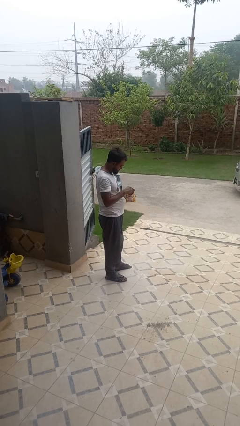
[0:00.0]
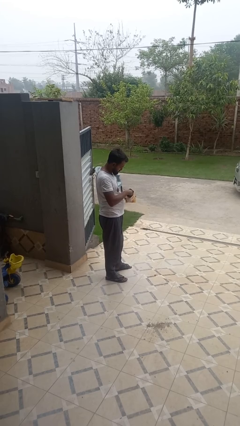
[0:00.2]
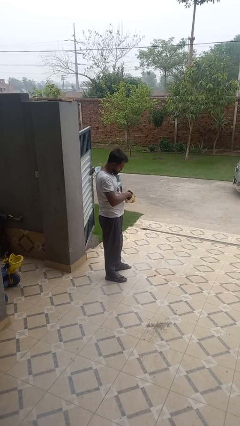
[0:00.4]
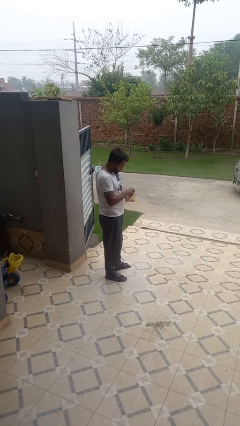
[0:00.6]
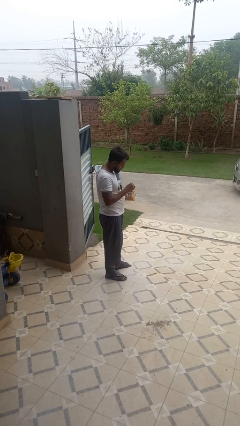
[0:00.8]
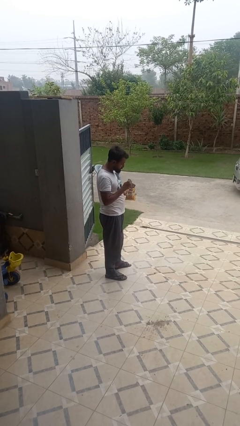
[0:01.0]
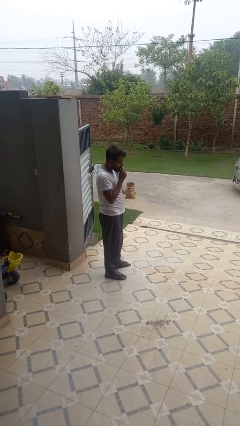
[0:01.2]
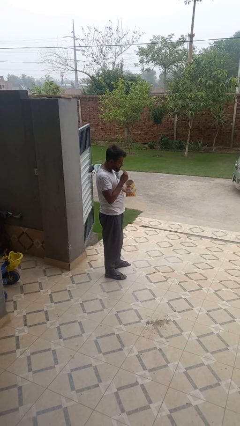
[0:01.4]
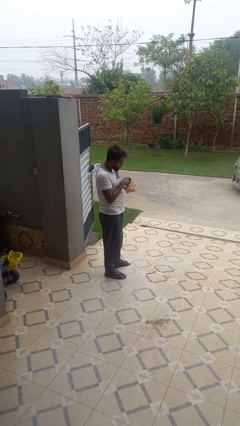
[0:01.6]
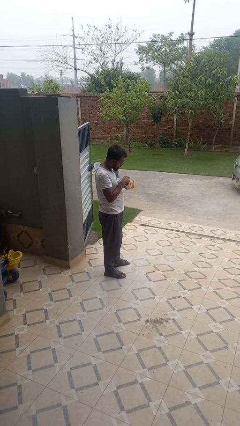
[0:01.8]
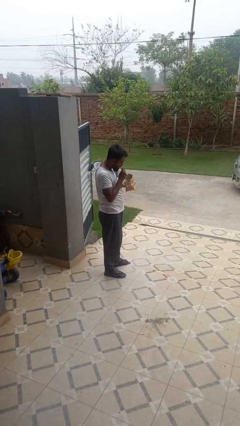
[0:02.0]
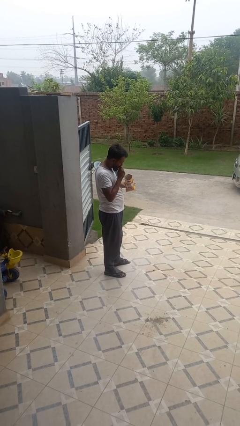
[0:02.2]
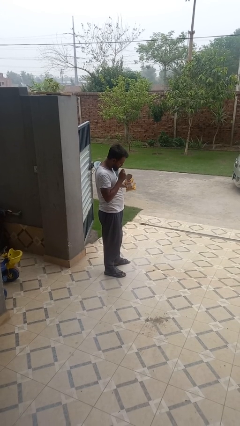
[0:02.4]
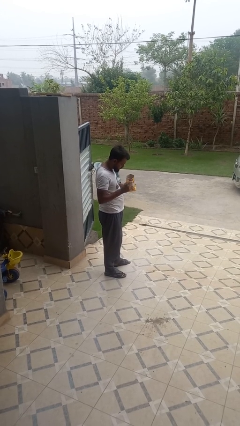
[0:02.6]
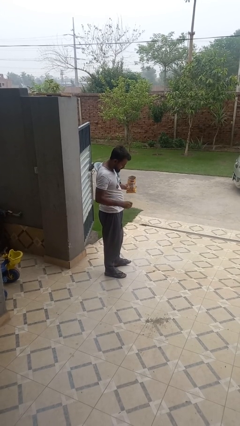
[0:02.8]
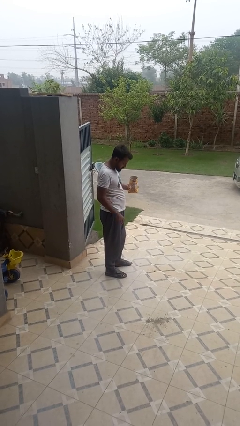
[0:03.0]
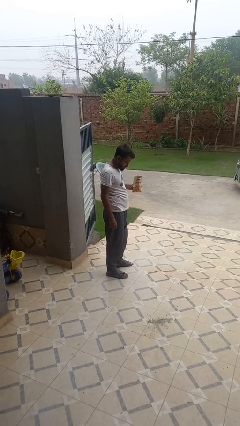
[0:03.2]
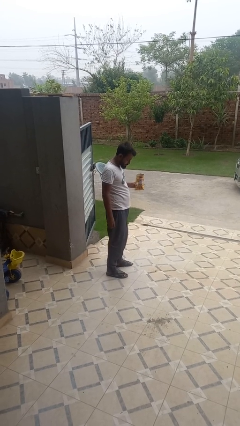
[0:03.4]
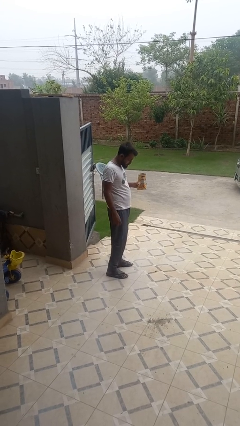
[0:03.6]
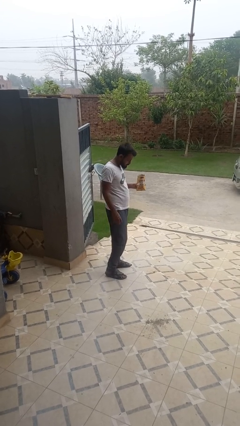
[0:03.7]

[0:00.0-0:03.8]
person eats snack from bag

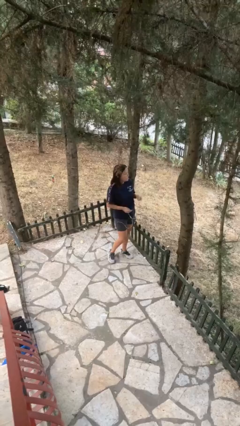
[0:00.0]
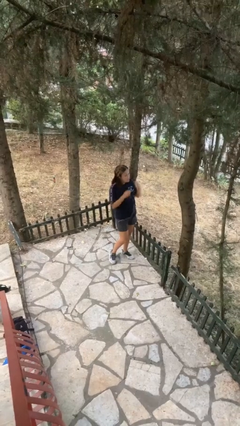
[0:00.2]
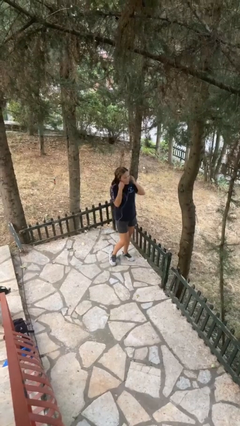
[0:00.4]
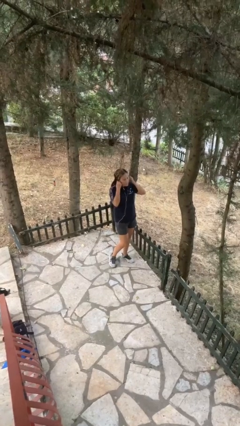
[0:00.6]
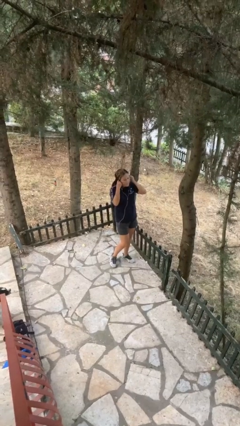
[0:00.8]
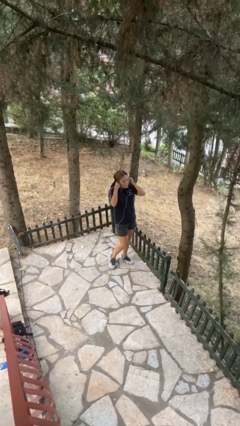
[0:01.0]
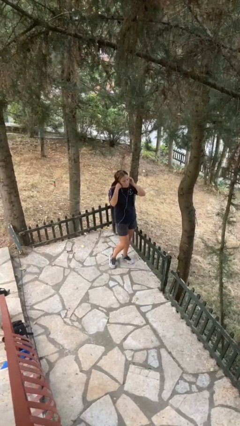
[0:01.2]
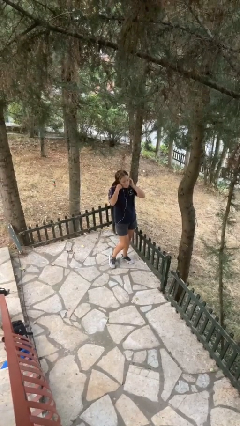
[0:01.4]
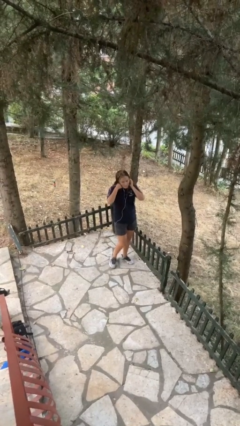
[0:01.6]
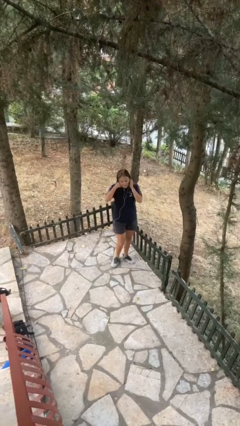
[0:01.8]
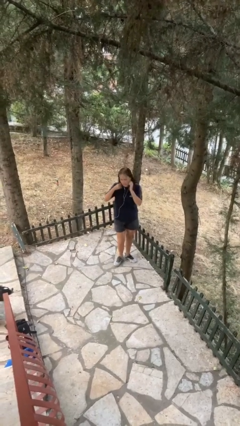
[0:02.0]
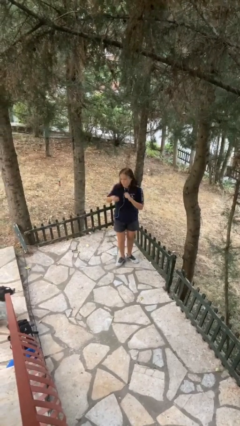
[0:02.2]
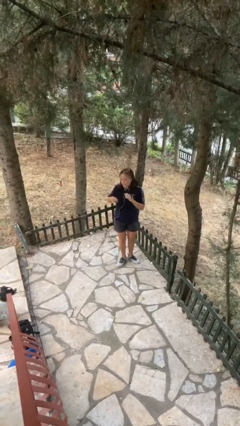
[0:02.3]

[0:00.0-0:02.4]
person puts on headphones

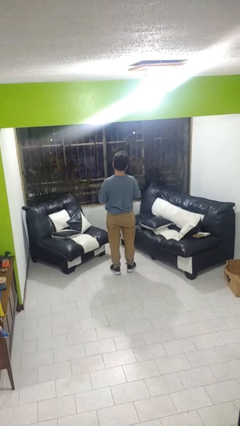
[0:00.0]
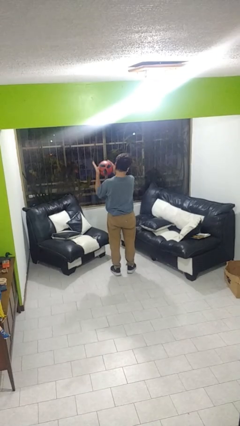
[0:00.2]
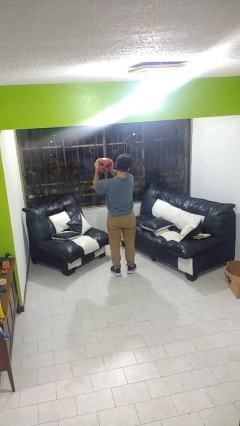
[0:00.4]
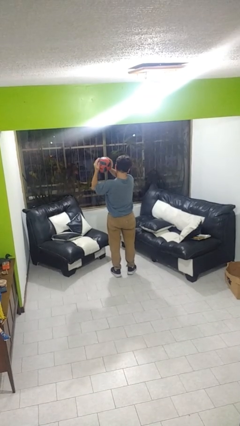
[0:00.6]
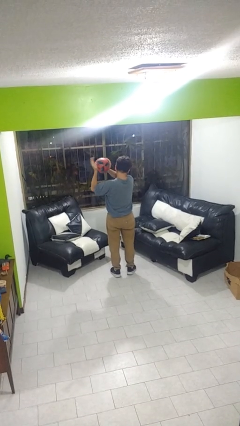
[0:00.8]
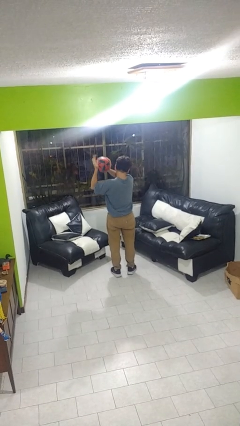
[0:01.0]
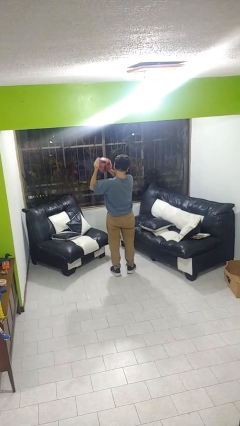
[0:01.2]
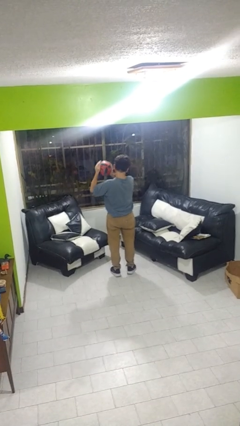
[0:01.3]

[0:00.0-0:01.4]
person squeezes object

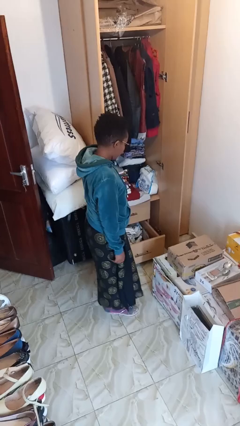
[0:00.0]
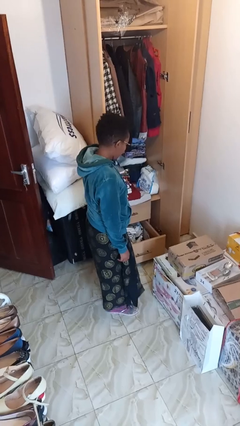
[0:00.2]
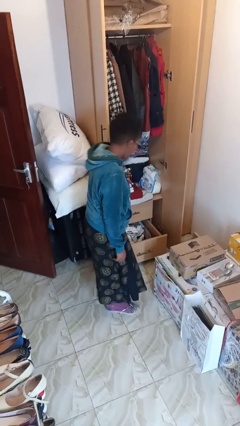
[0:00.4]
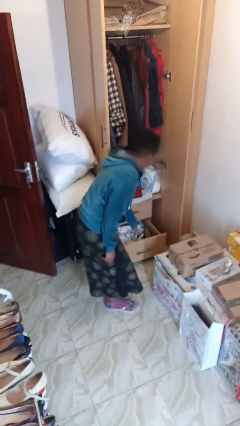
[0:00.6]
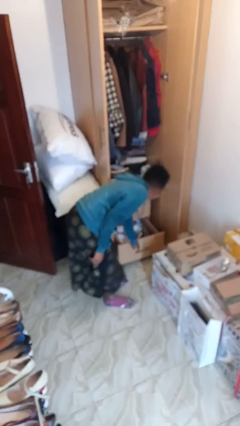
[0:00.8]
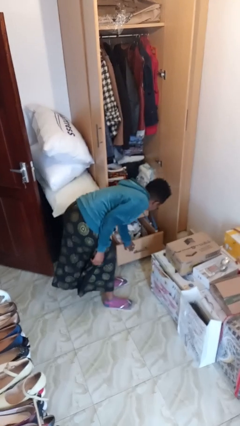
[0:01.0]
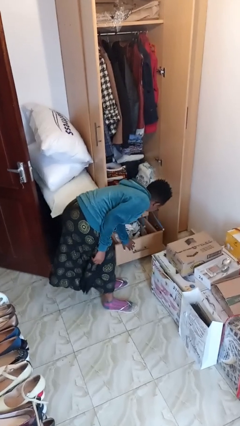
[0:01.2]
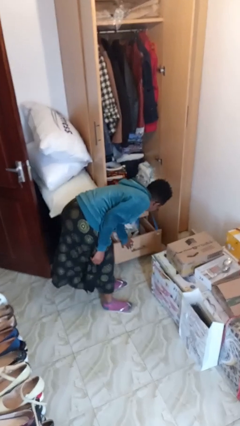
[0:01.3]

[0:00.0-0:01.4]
person closes dresser drawer

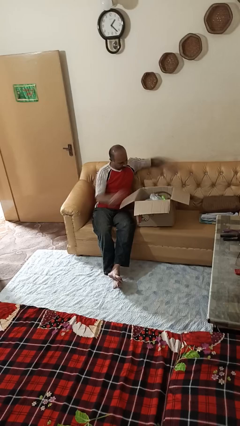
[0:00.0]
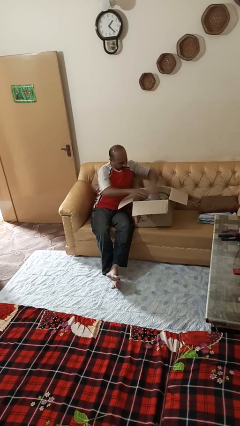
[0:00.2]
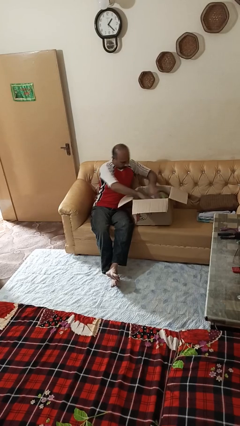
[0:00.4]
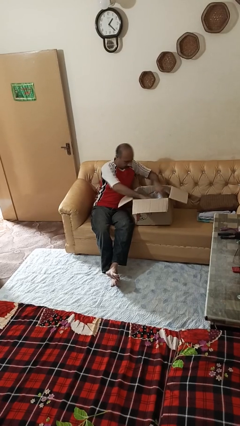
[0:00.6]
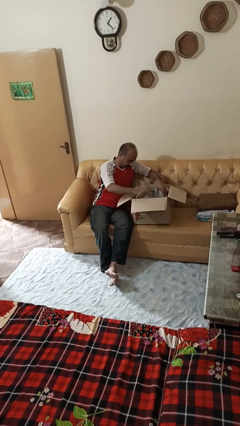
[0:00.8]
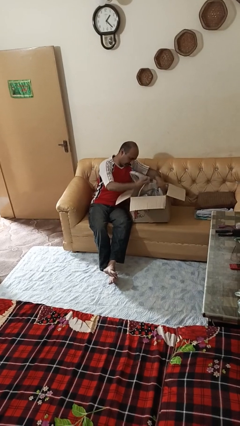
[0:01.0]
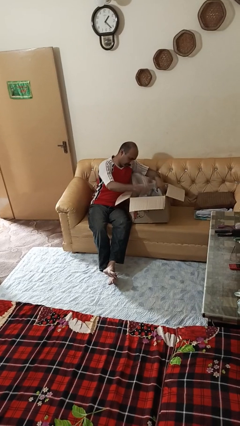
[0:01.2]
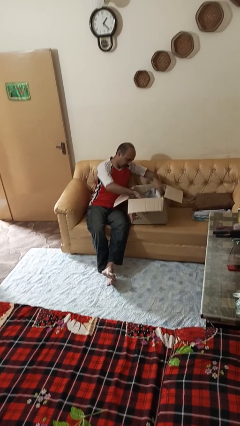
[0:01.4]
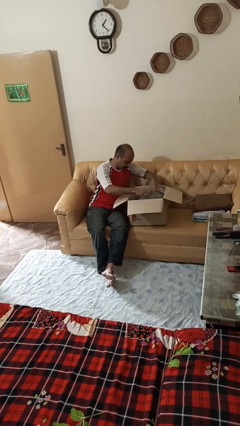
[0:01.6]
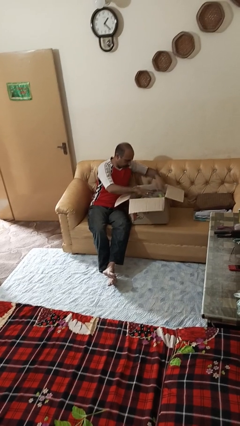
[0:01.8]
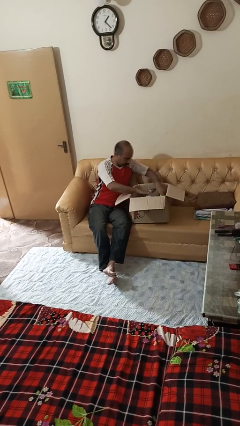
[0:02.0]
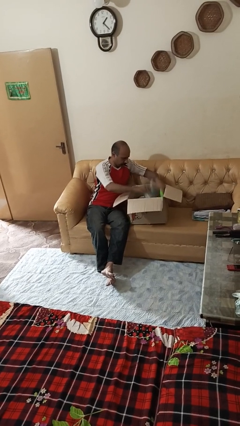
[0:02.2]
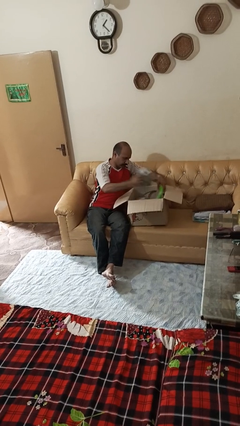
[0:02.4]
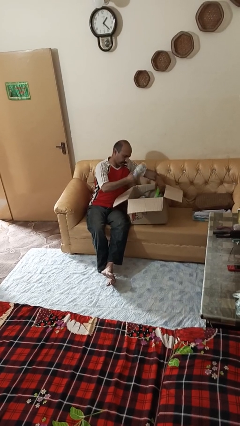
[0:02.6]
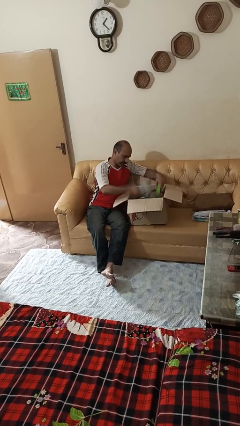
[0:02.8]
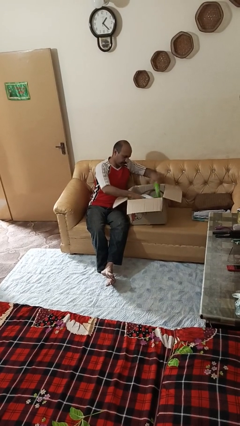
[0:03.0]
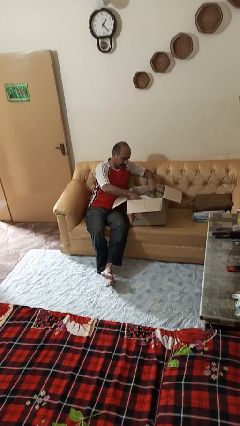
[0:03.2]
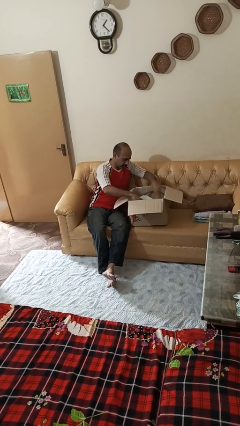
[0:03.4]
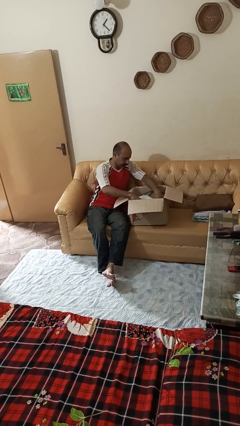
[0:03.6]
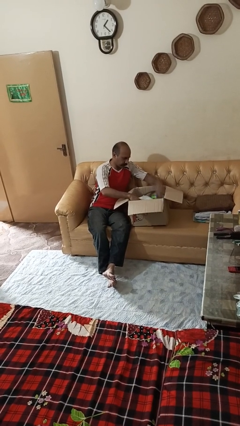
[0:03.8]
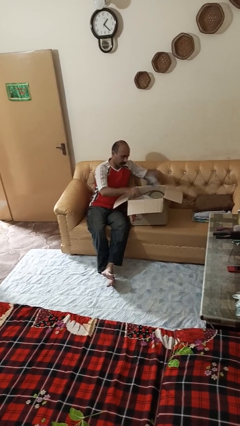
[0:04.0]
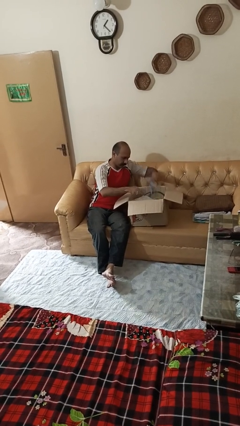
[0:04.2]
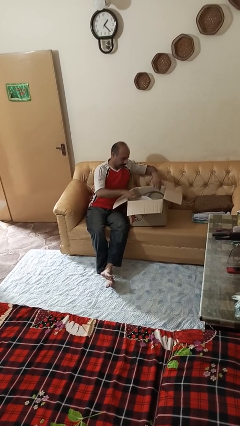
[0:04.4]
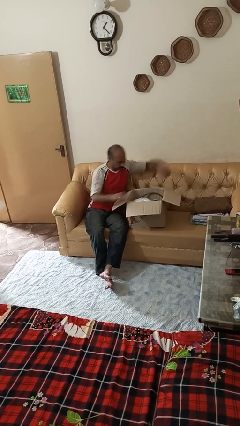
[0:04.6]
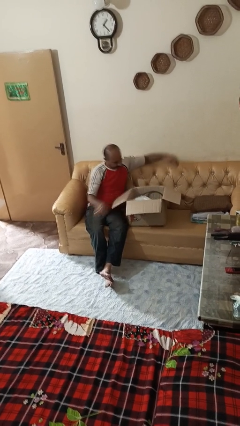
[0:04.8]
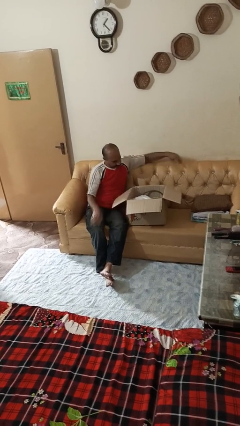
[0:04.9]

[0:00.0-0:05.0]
person searches in box

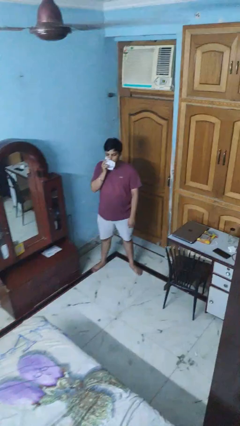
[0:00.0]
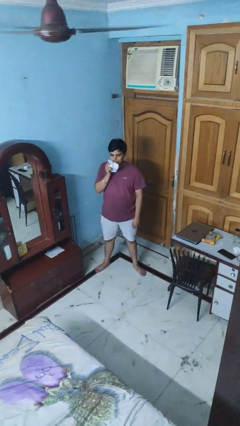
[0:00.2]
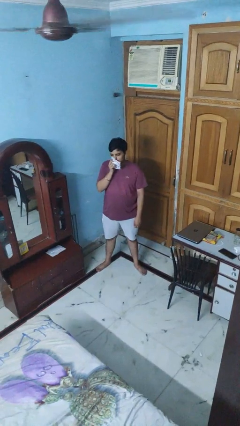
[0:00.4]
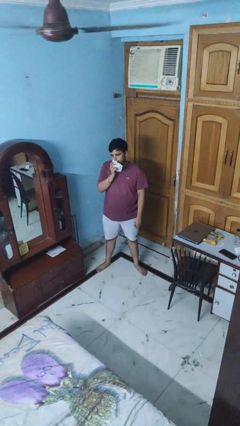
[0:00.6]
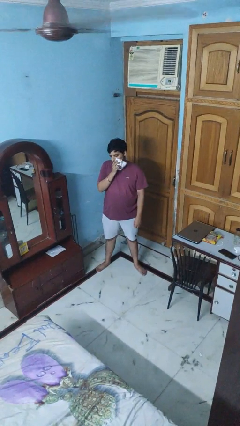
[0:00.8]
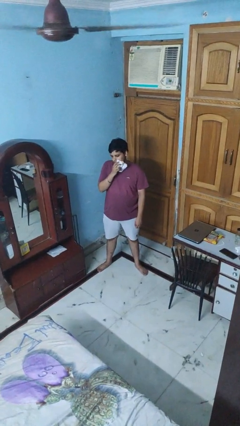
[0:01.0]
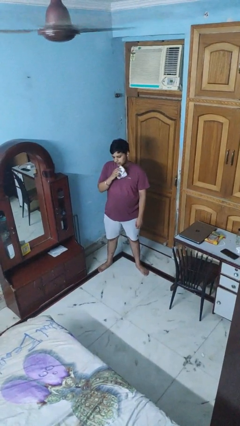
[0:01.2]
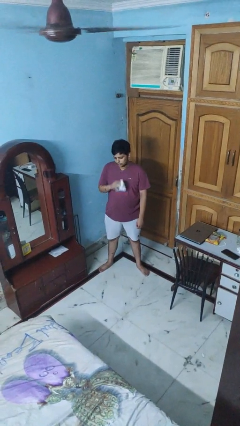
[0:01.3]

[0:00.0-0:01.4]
person wipes mouth with napkin

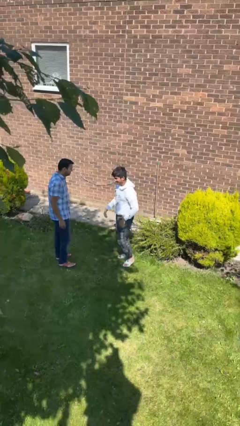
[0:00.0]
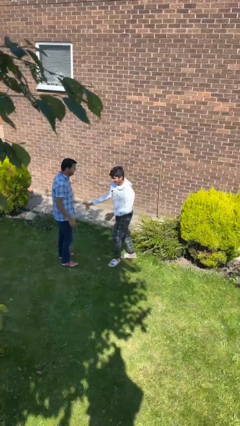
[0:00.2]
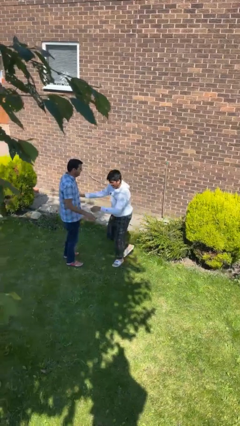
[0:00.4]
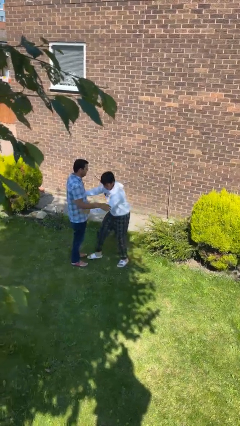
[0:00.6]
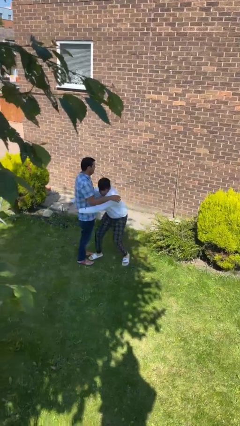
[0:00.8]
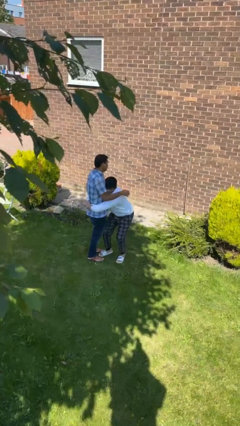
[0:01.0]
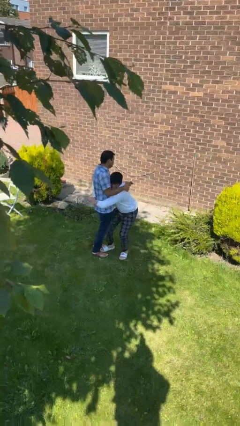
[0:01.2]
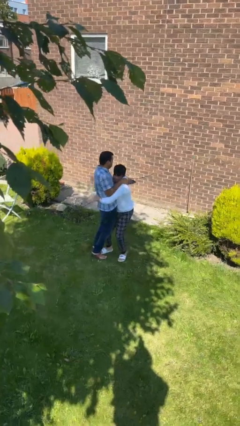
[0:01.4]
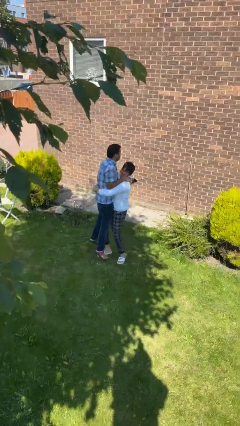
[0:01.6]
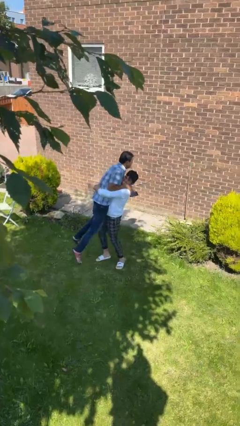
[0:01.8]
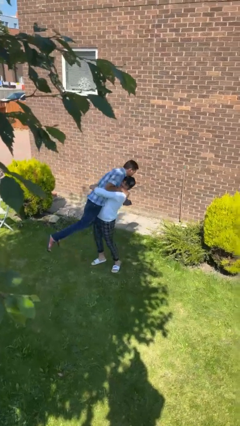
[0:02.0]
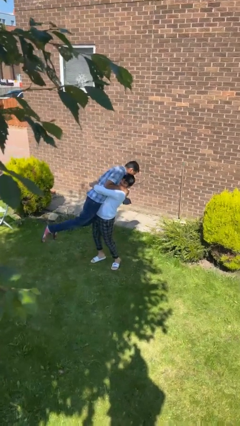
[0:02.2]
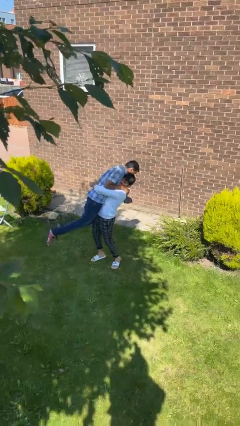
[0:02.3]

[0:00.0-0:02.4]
person picks up person
